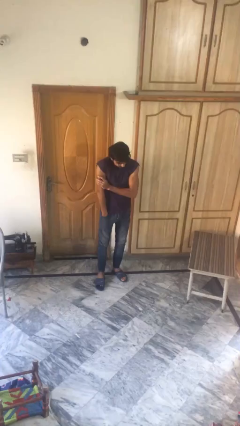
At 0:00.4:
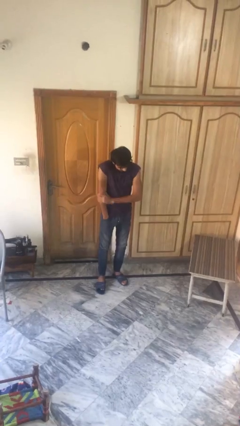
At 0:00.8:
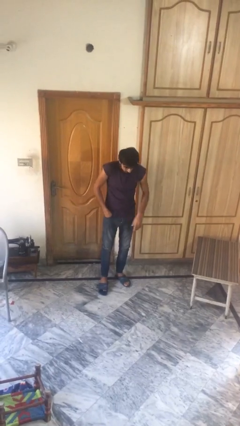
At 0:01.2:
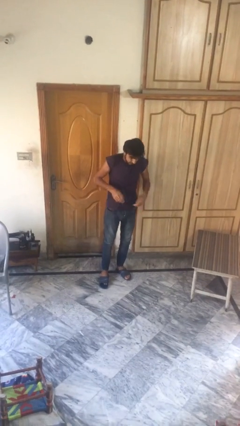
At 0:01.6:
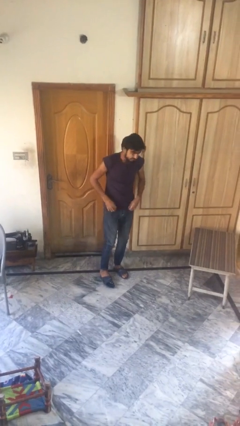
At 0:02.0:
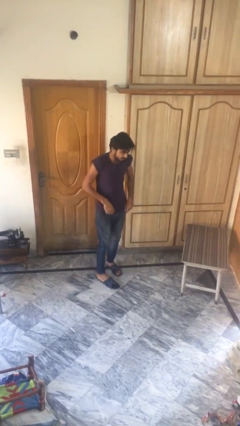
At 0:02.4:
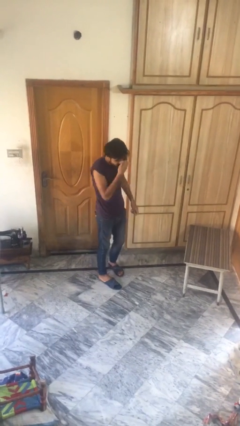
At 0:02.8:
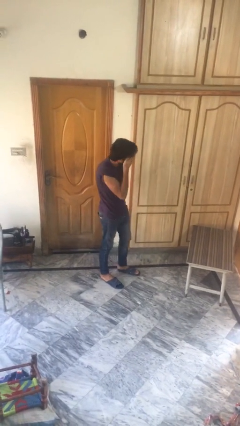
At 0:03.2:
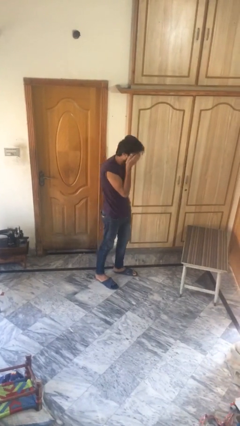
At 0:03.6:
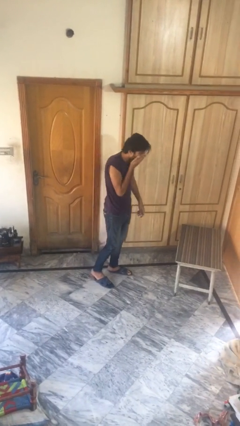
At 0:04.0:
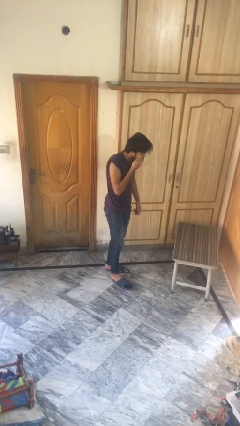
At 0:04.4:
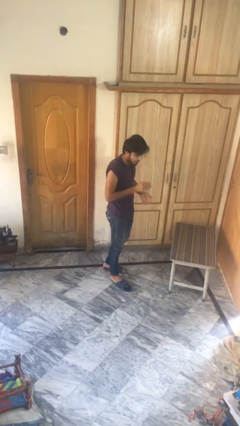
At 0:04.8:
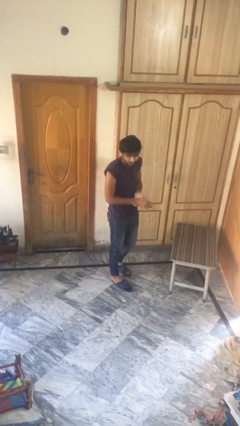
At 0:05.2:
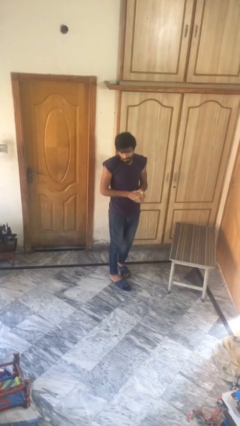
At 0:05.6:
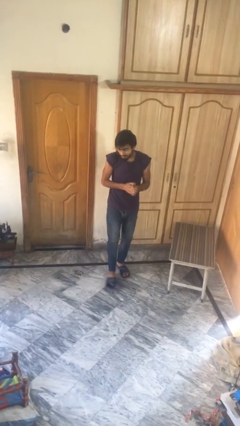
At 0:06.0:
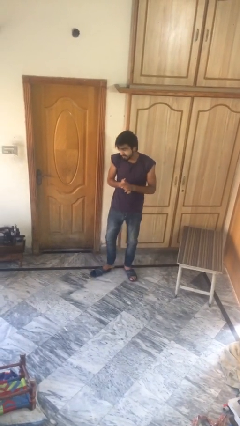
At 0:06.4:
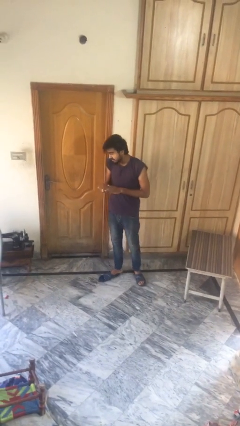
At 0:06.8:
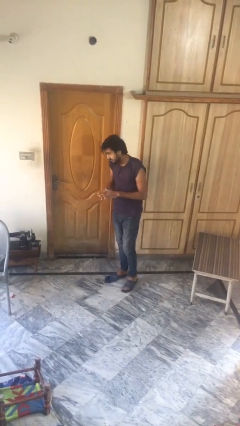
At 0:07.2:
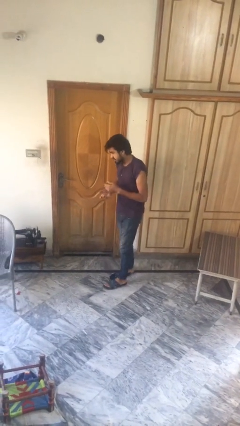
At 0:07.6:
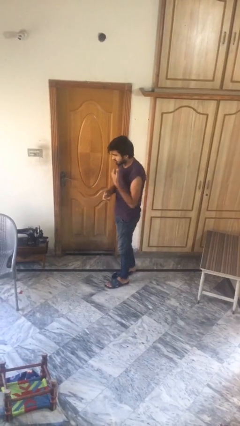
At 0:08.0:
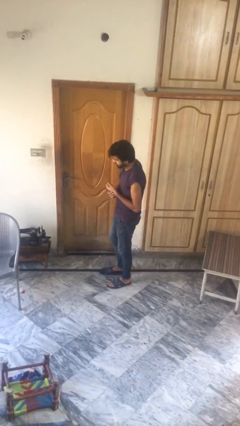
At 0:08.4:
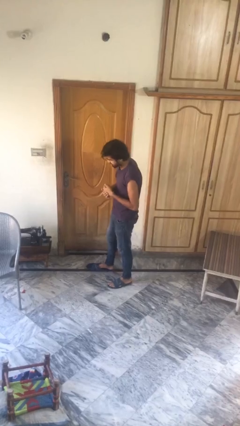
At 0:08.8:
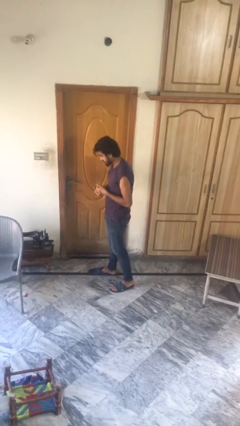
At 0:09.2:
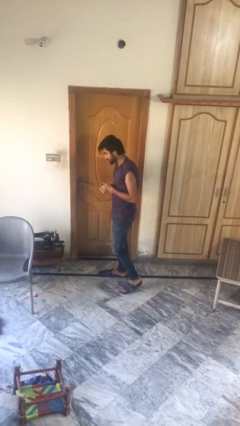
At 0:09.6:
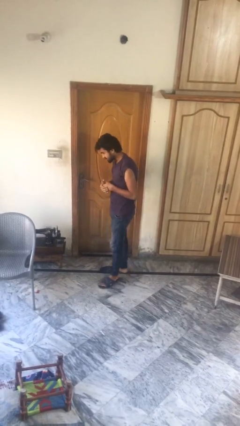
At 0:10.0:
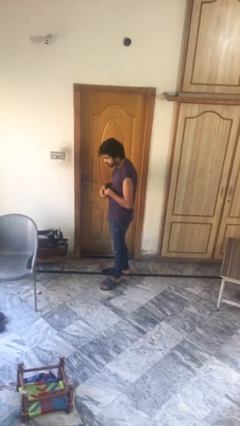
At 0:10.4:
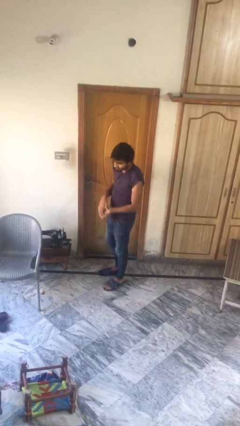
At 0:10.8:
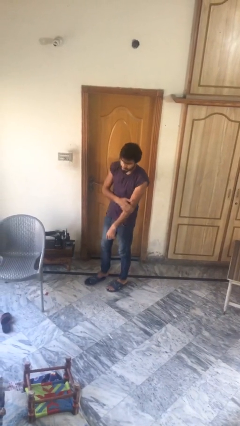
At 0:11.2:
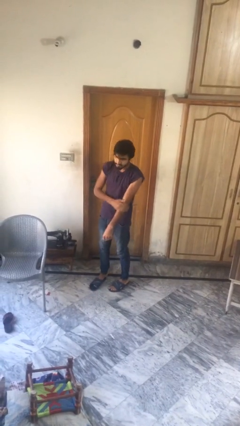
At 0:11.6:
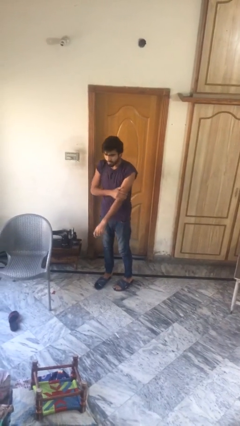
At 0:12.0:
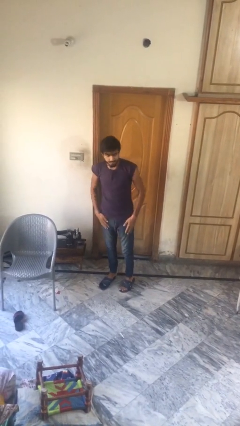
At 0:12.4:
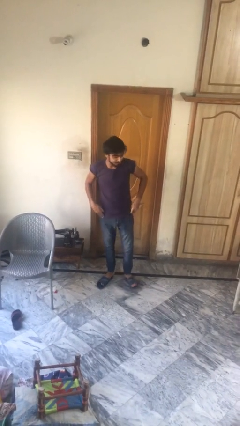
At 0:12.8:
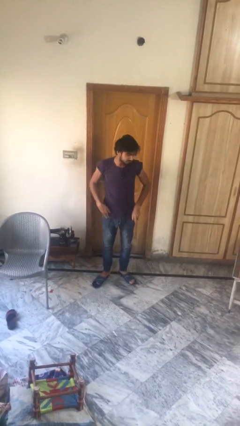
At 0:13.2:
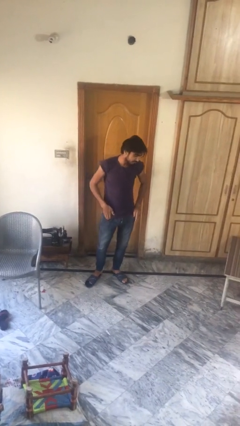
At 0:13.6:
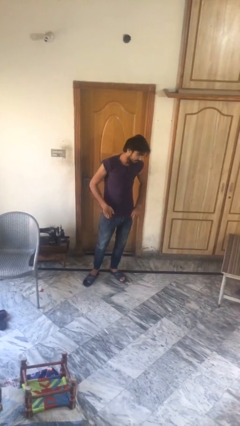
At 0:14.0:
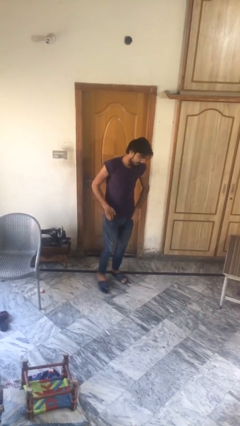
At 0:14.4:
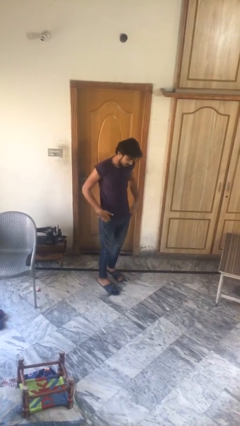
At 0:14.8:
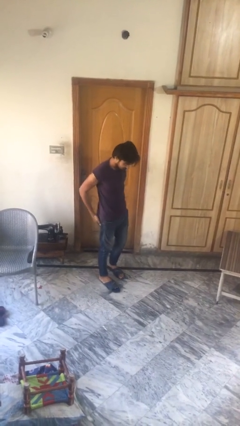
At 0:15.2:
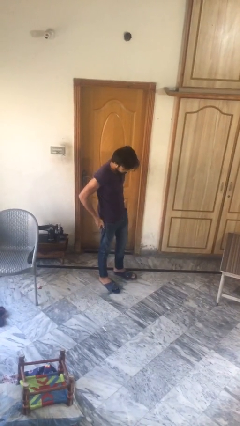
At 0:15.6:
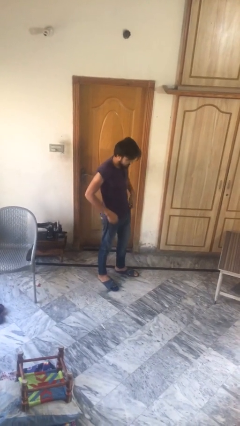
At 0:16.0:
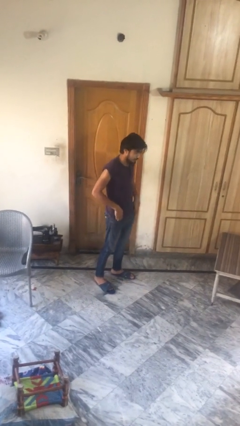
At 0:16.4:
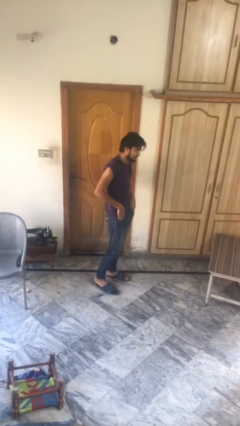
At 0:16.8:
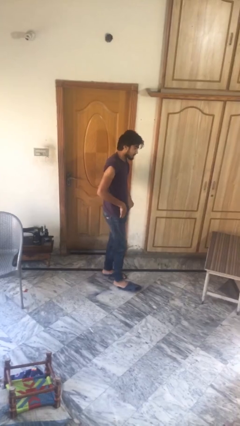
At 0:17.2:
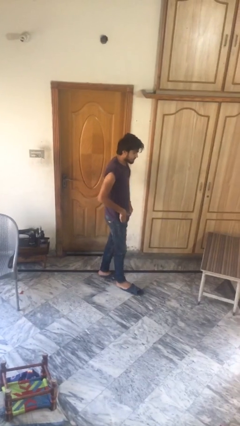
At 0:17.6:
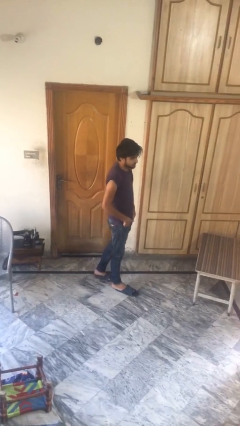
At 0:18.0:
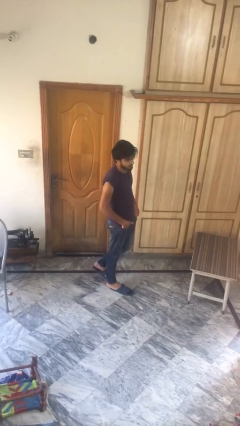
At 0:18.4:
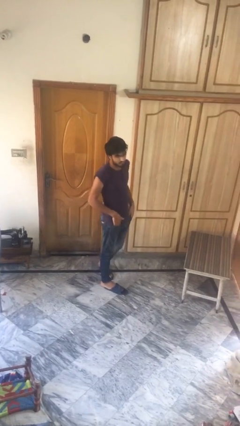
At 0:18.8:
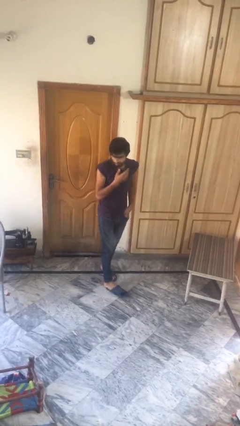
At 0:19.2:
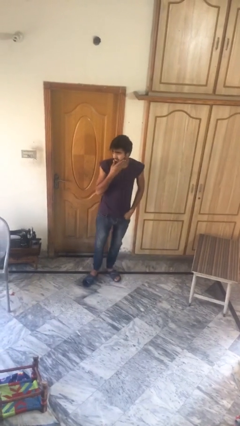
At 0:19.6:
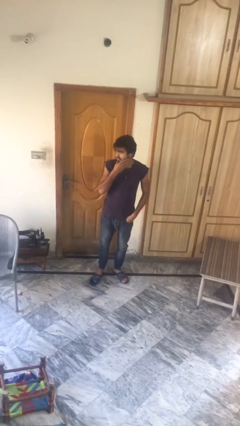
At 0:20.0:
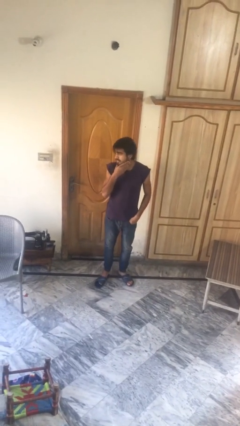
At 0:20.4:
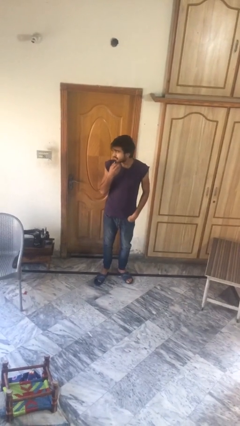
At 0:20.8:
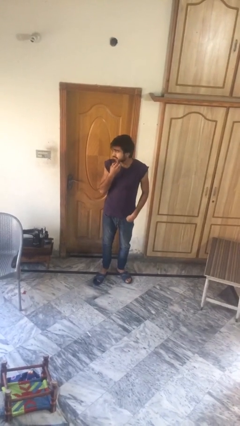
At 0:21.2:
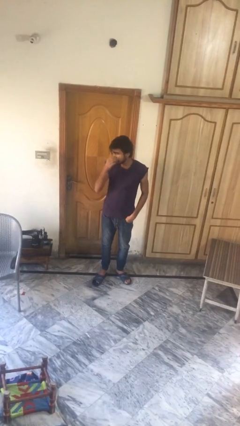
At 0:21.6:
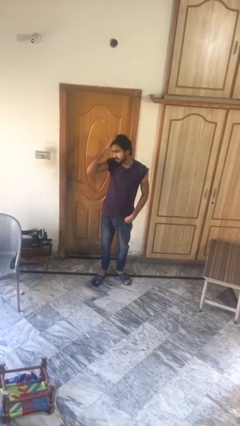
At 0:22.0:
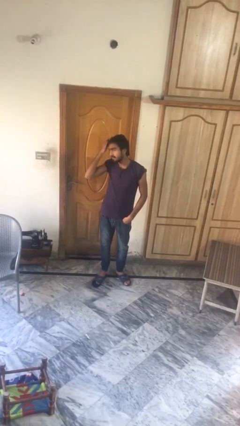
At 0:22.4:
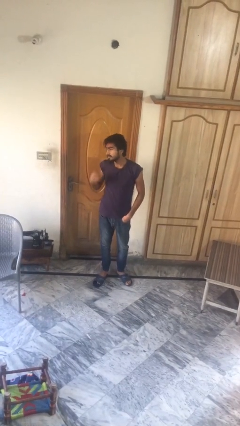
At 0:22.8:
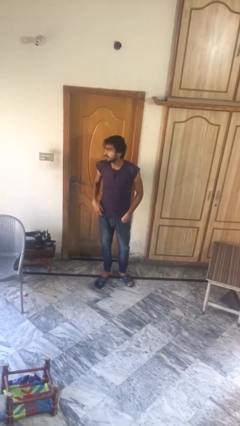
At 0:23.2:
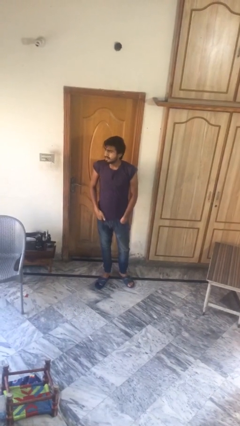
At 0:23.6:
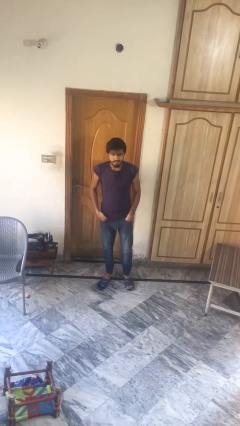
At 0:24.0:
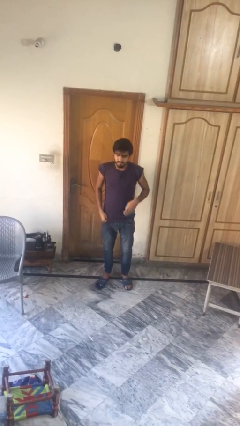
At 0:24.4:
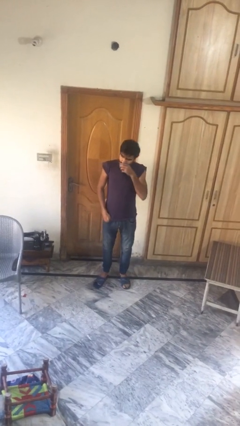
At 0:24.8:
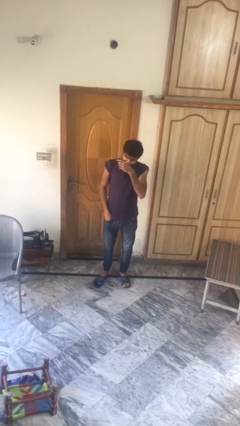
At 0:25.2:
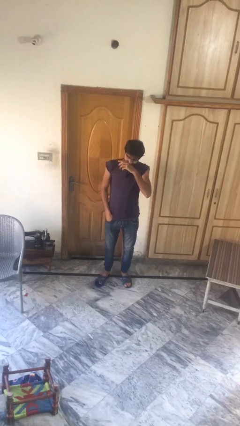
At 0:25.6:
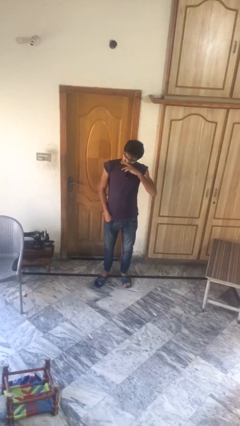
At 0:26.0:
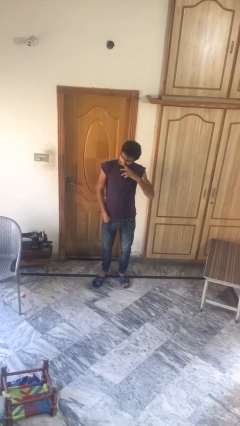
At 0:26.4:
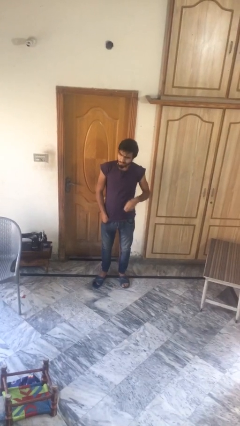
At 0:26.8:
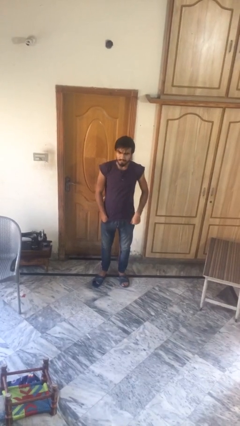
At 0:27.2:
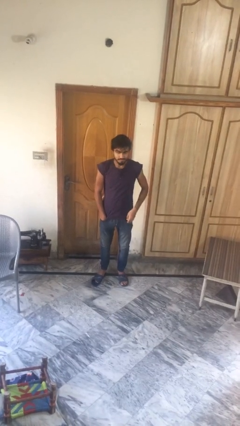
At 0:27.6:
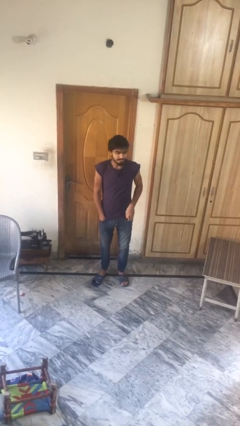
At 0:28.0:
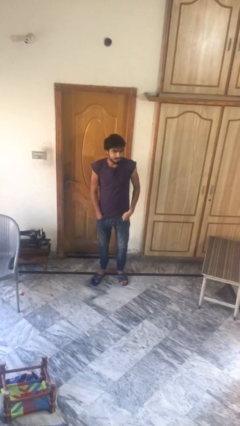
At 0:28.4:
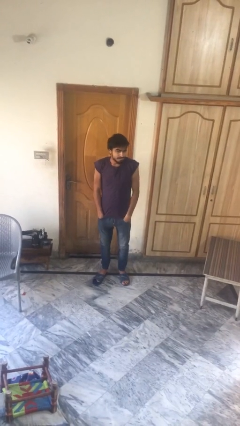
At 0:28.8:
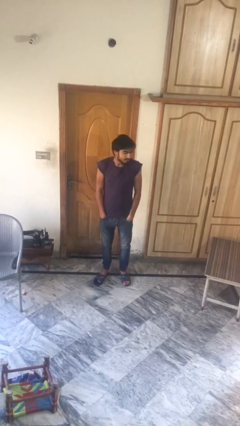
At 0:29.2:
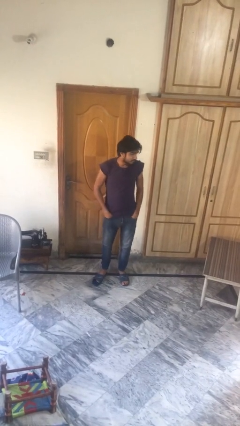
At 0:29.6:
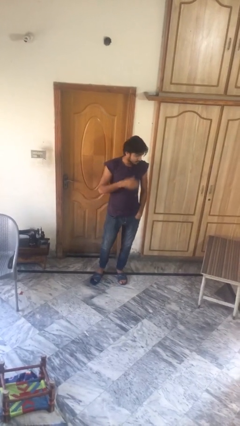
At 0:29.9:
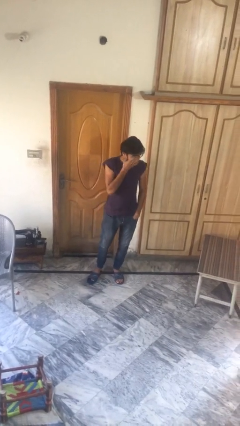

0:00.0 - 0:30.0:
person walks

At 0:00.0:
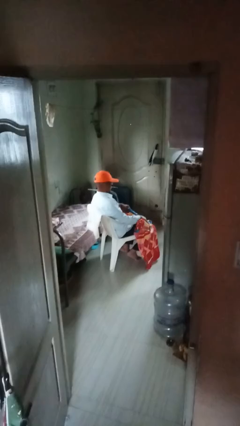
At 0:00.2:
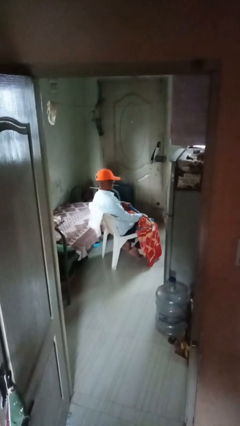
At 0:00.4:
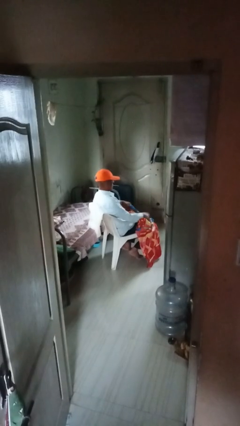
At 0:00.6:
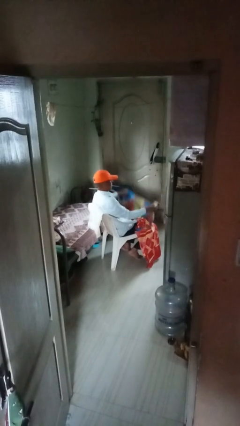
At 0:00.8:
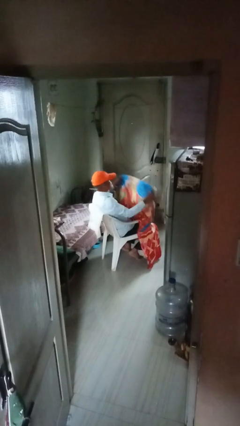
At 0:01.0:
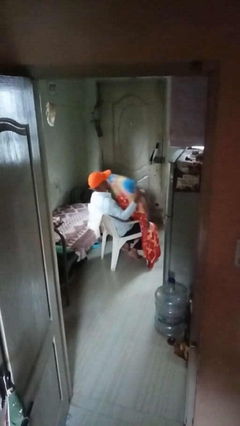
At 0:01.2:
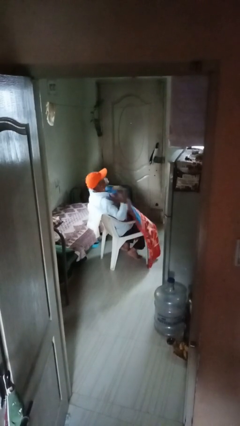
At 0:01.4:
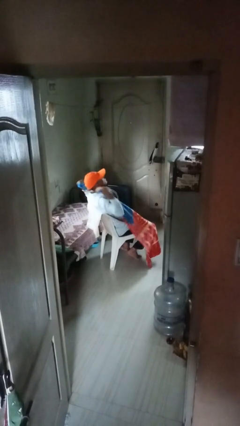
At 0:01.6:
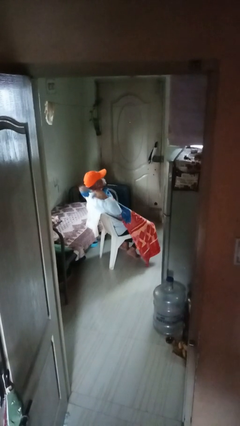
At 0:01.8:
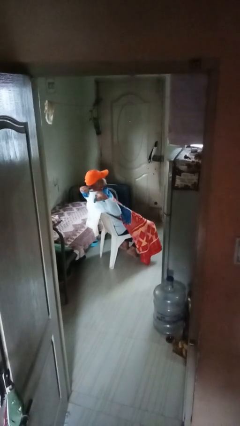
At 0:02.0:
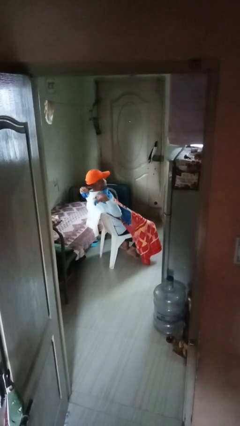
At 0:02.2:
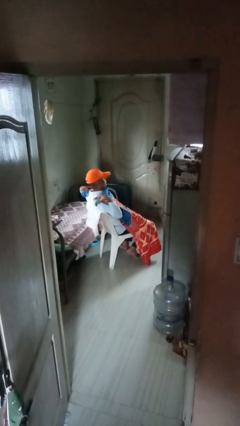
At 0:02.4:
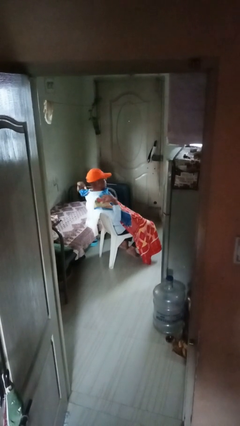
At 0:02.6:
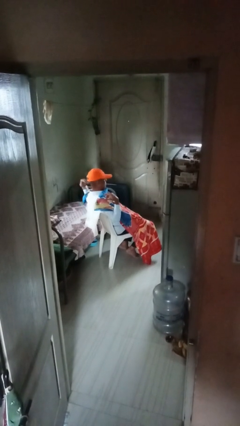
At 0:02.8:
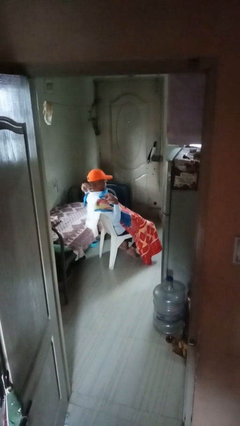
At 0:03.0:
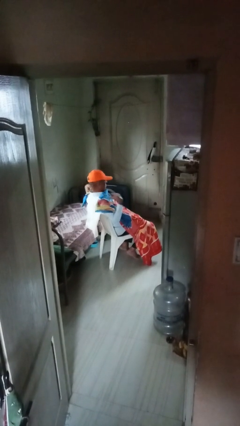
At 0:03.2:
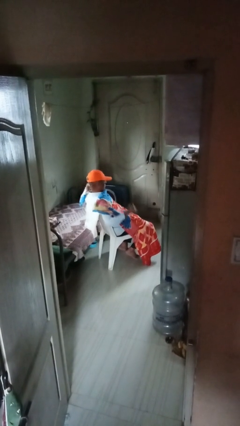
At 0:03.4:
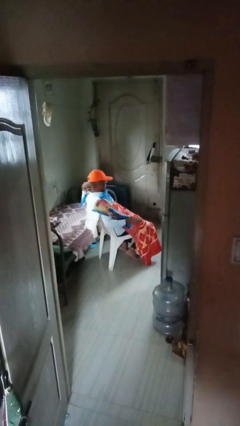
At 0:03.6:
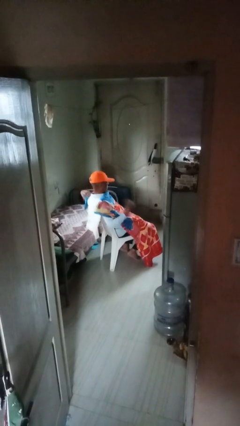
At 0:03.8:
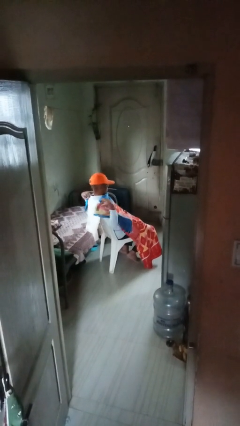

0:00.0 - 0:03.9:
person covers with blanket
